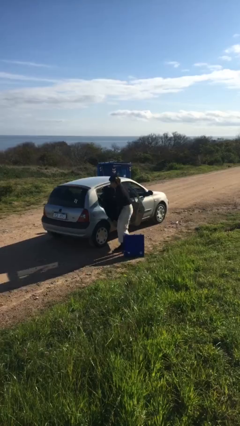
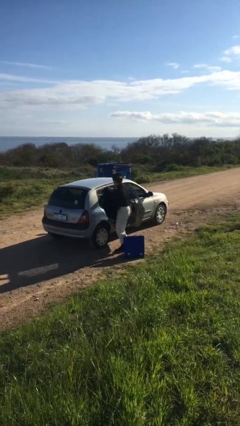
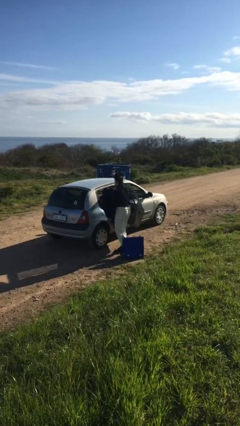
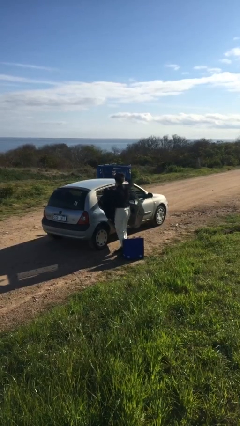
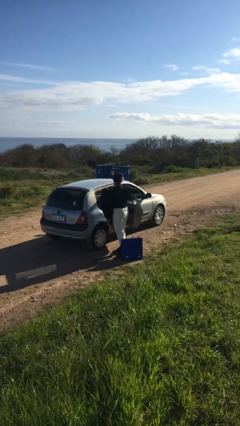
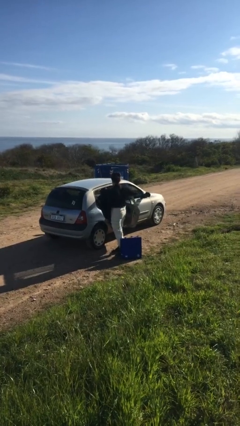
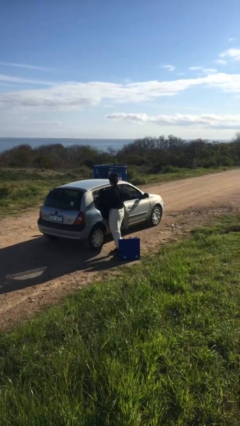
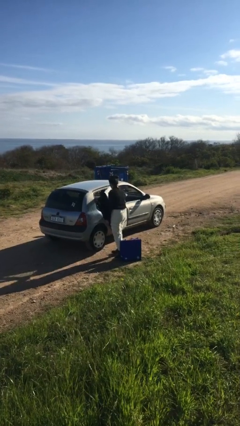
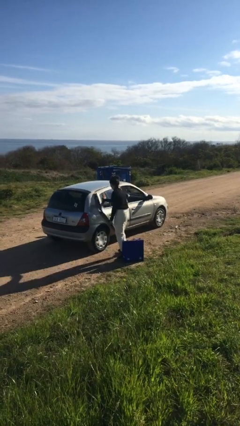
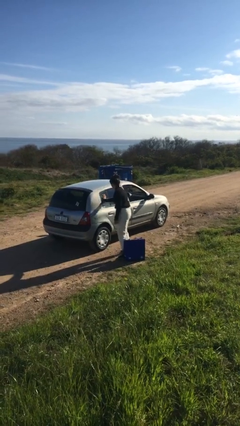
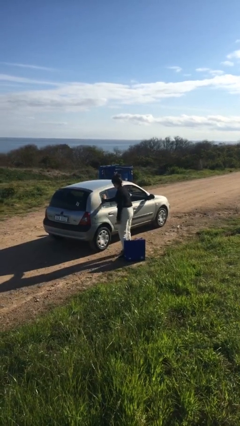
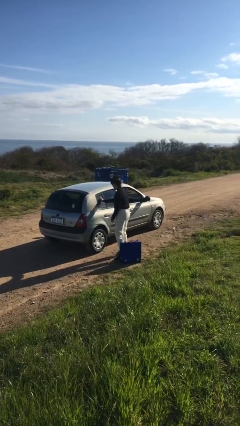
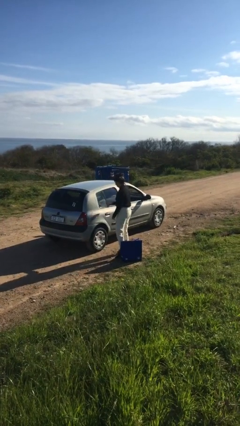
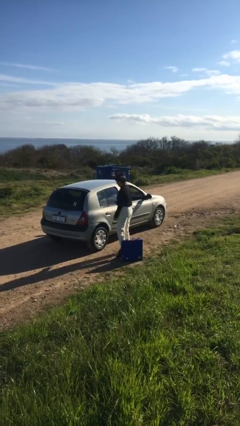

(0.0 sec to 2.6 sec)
person closes car door

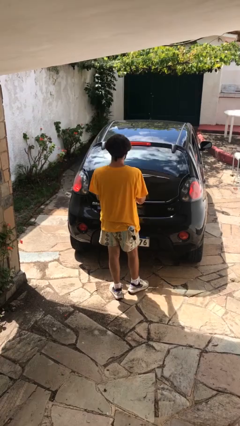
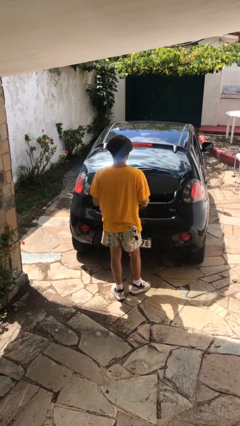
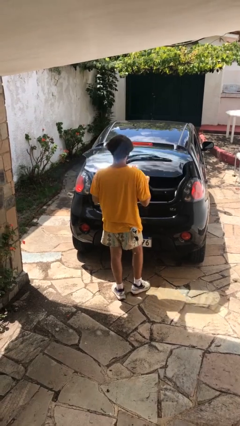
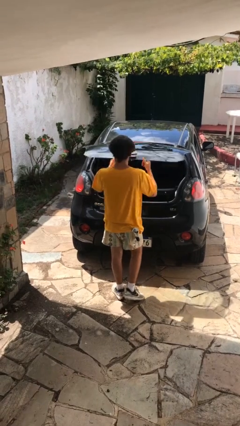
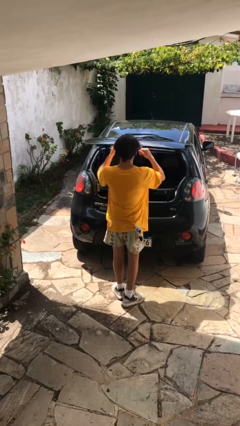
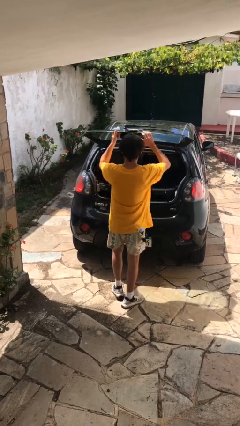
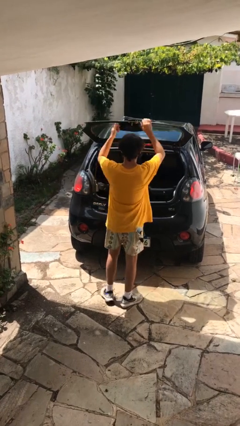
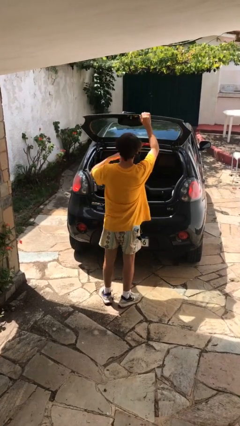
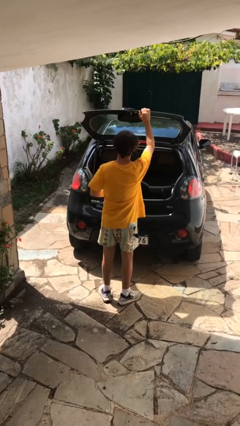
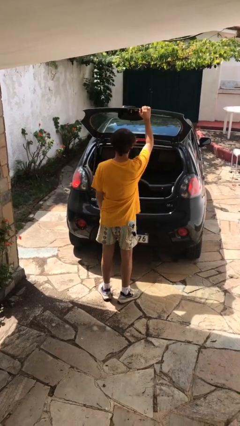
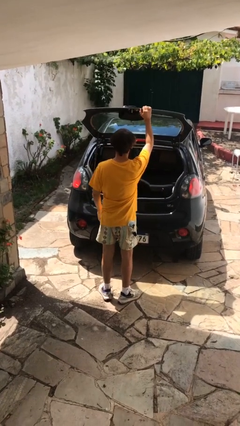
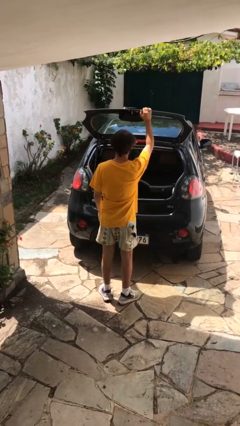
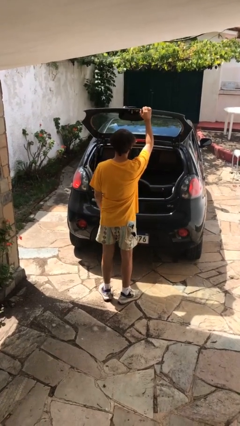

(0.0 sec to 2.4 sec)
person opens car trunk

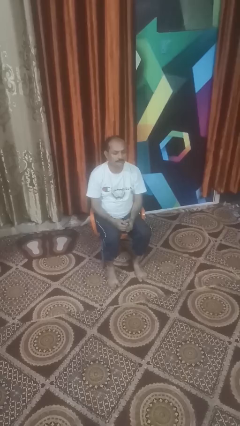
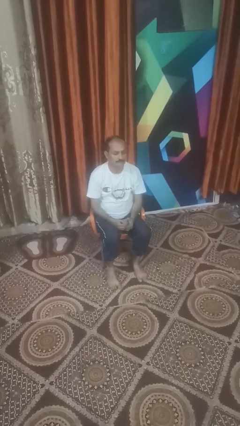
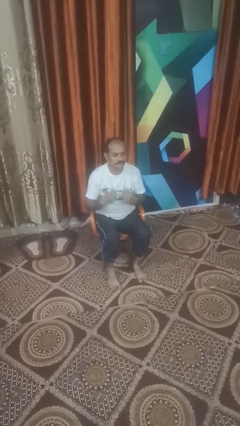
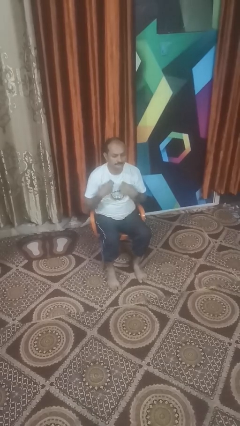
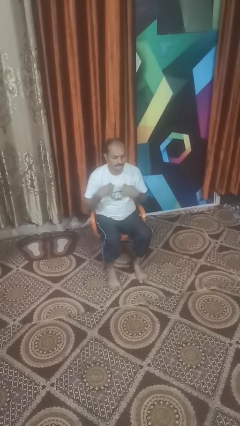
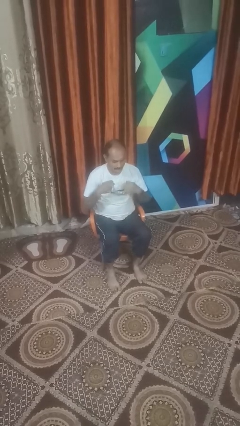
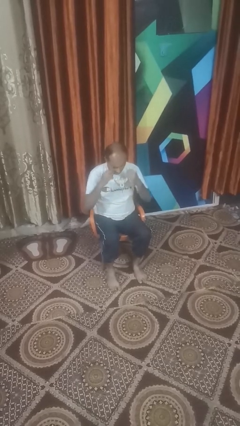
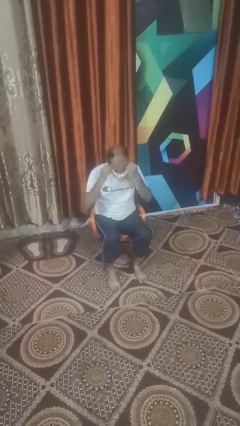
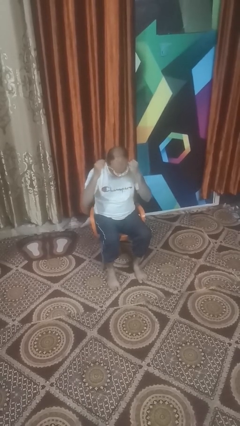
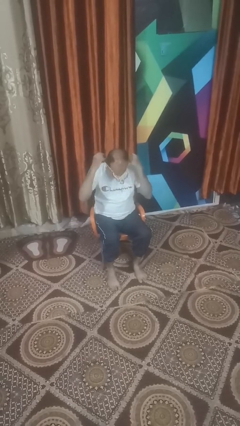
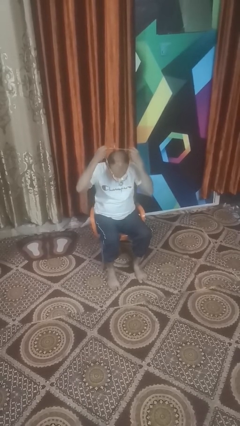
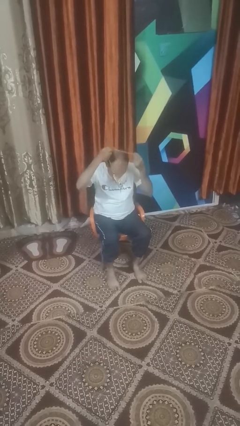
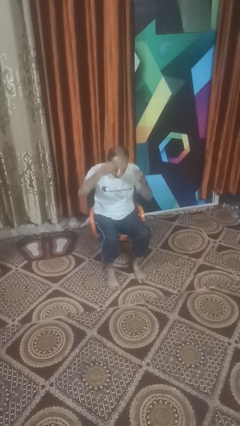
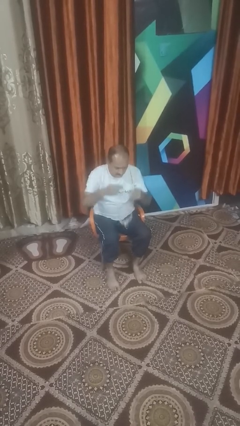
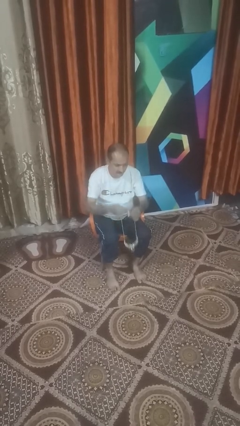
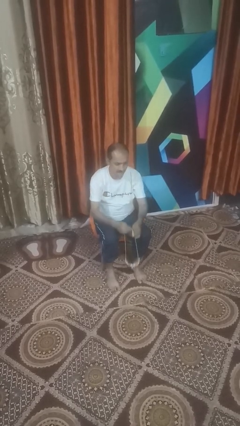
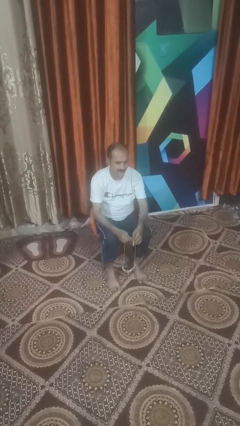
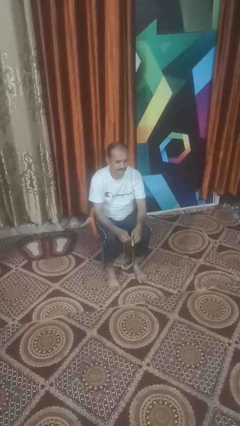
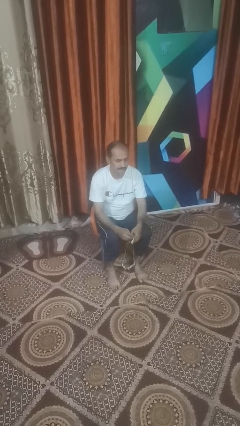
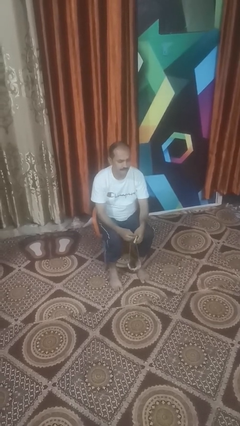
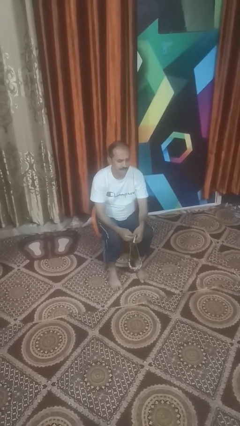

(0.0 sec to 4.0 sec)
person takes off necklace

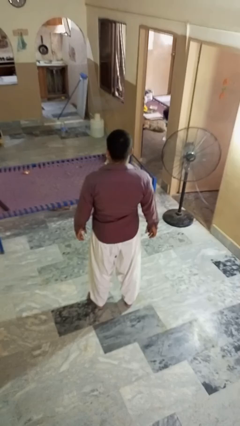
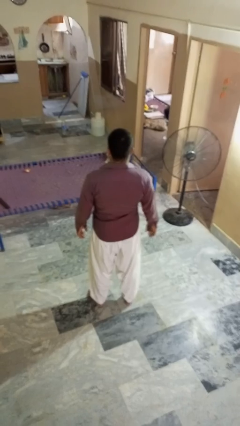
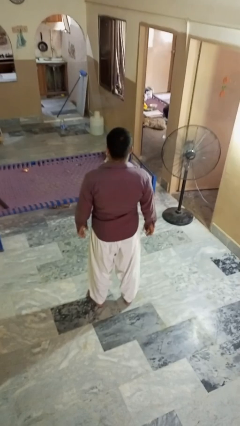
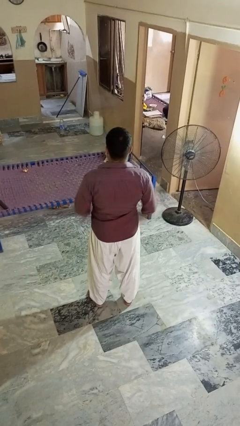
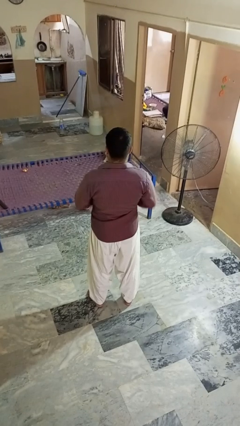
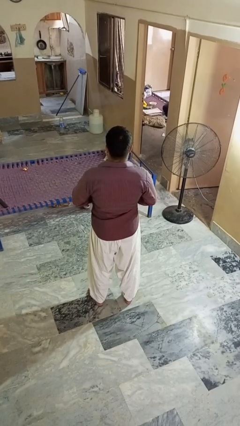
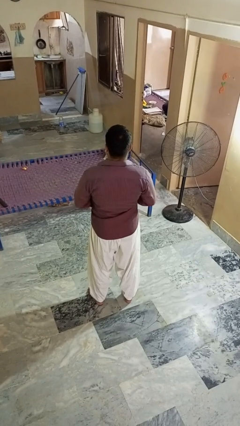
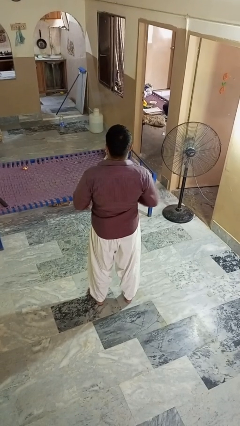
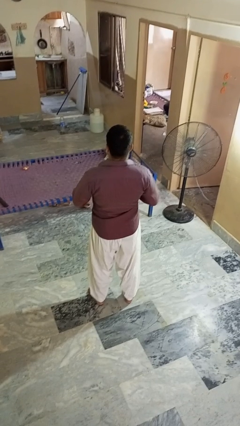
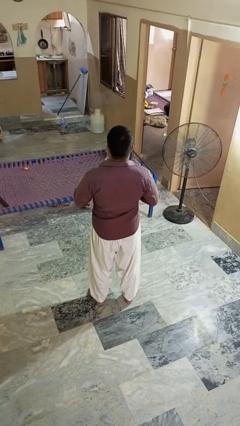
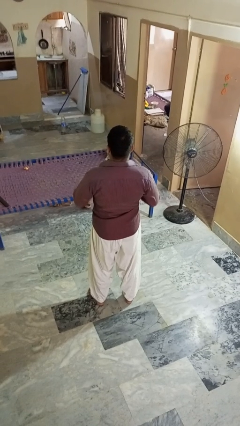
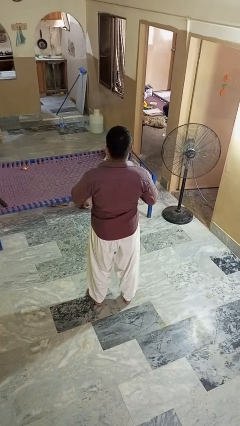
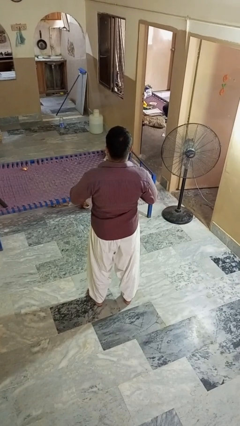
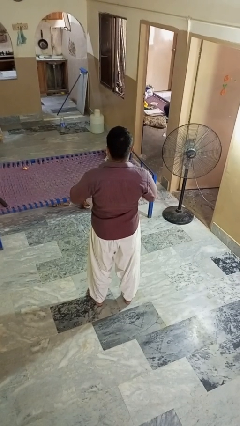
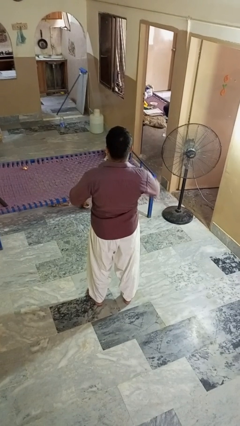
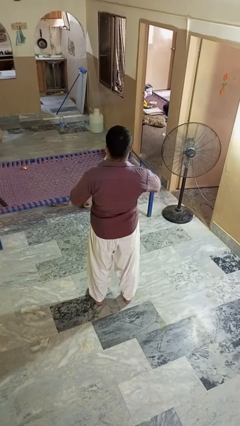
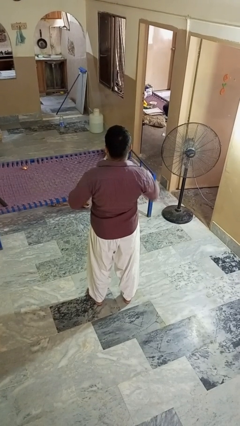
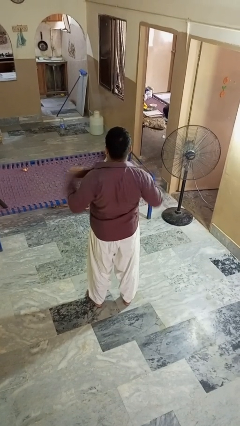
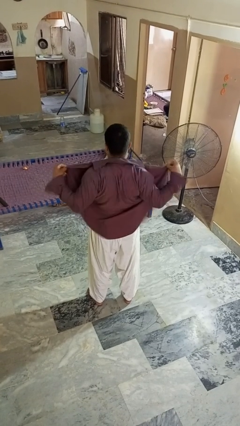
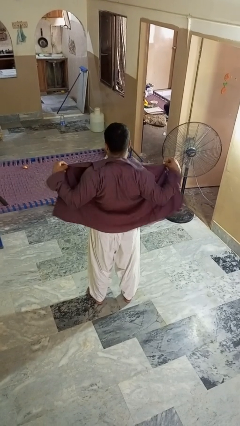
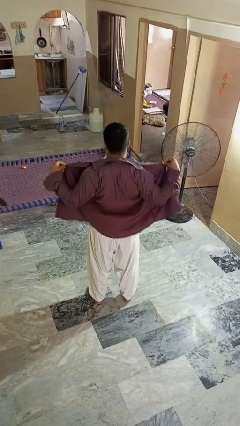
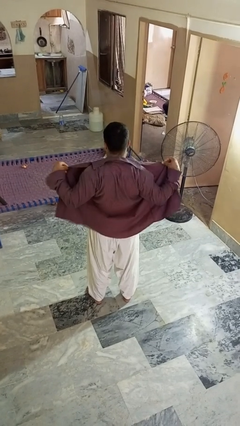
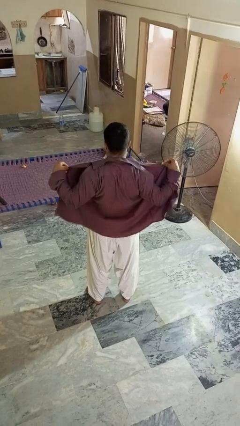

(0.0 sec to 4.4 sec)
person unbuttons shirt

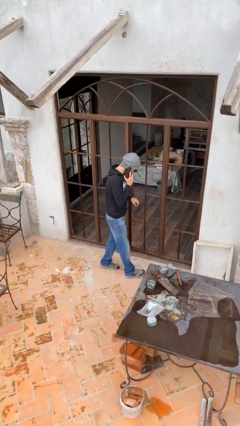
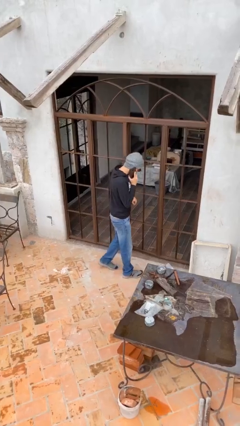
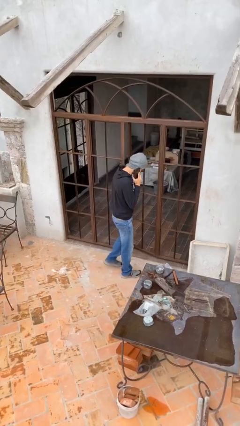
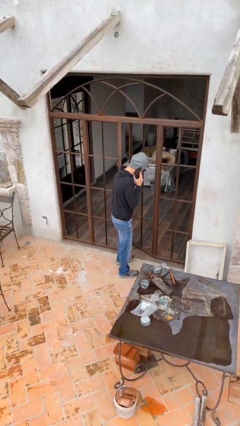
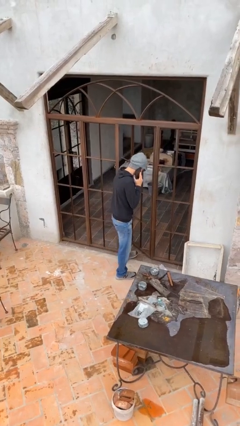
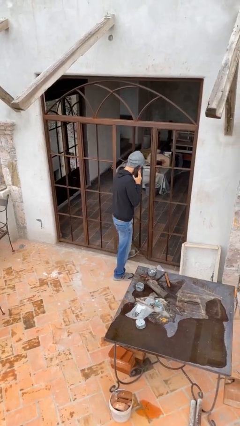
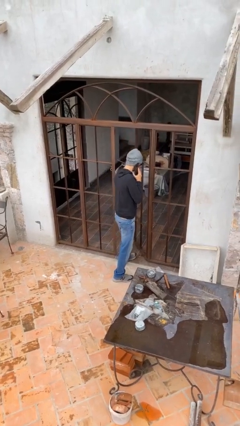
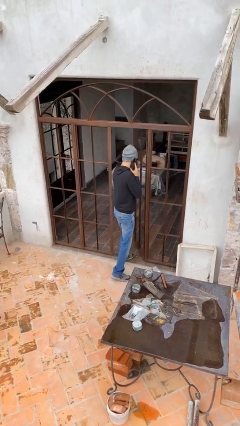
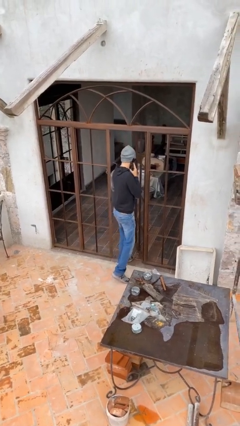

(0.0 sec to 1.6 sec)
person opens facility door

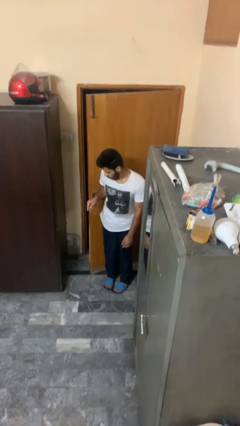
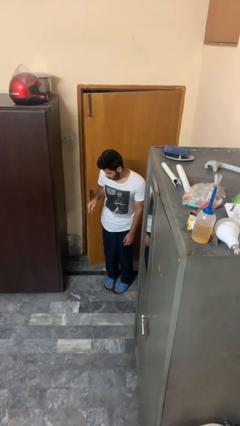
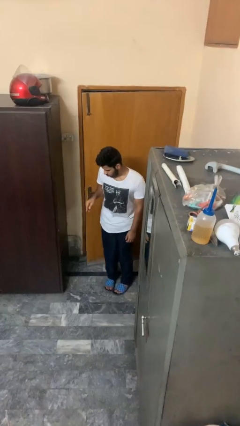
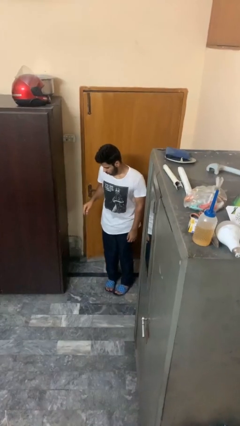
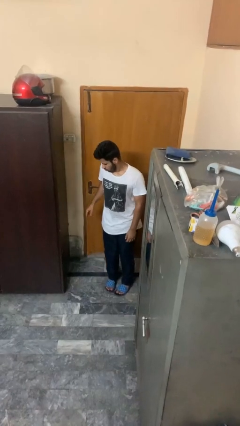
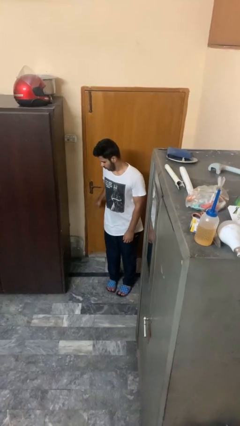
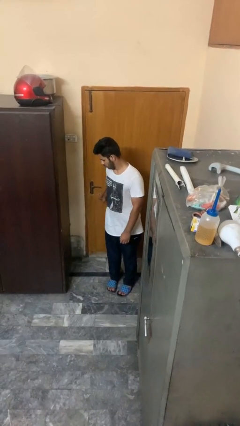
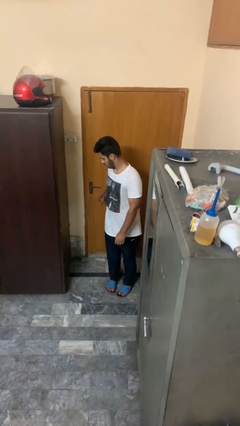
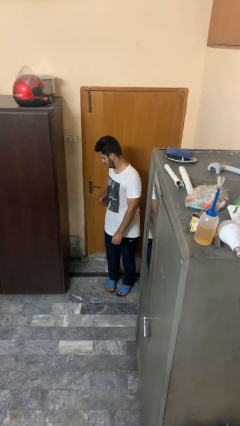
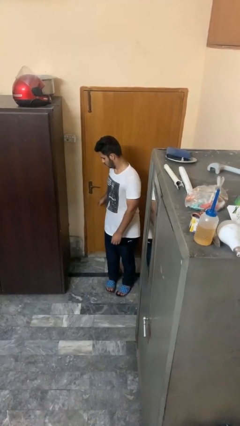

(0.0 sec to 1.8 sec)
person closes door with hip

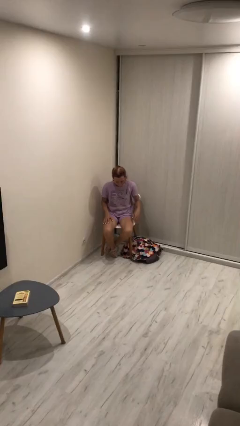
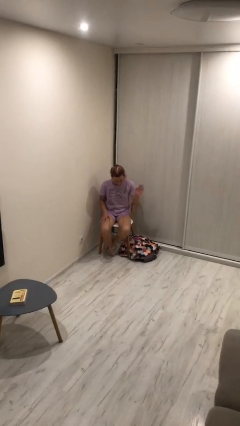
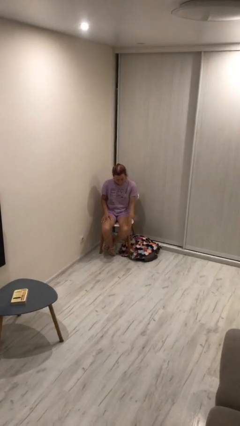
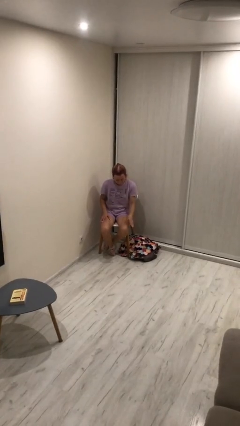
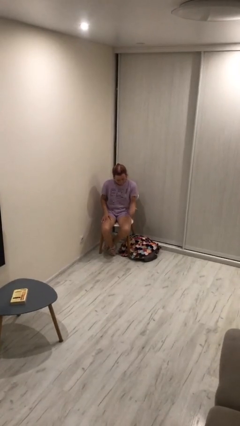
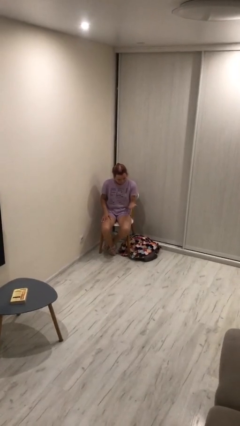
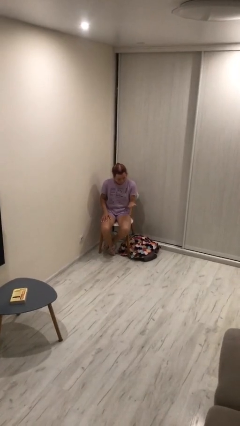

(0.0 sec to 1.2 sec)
person swats bug
